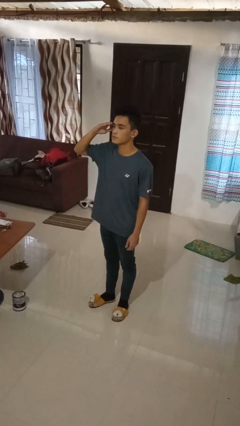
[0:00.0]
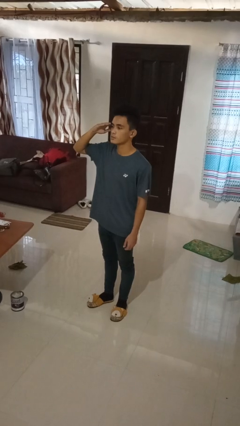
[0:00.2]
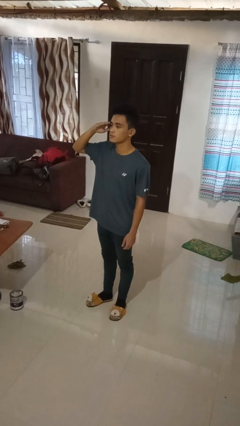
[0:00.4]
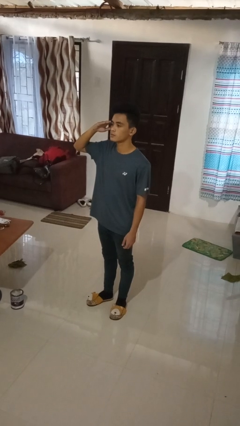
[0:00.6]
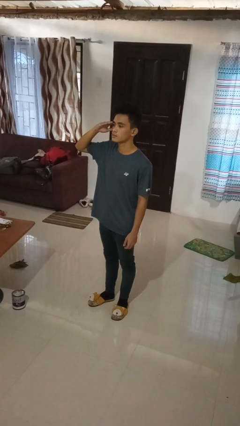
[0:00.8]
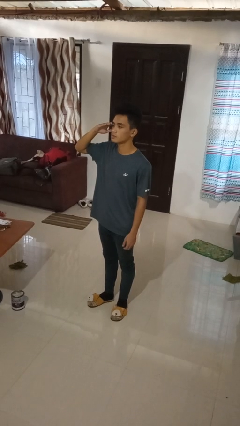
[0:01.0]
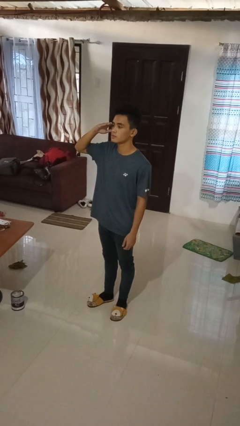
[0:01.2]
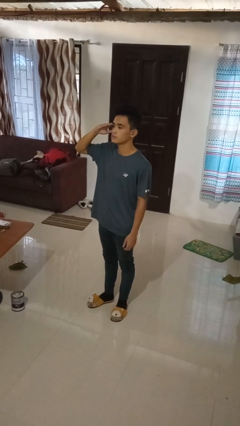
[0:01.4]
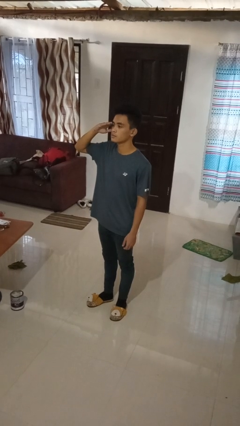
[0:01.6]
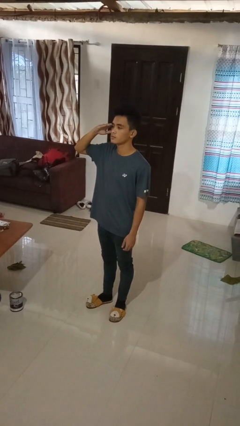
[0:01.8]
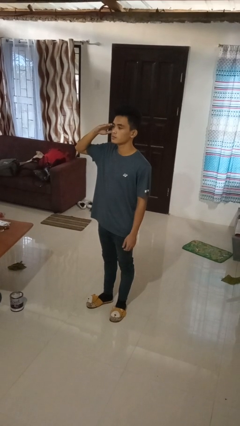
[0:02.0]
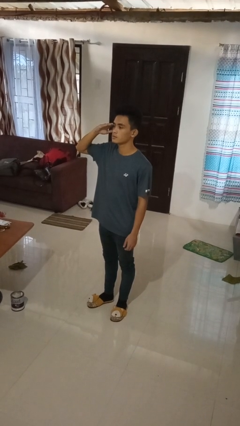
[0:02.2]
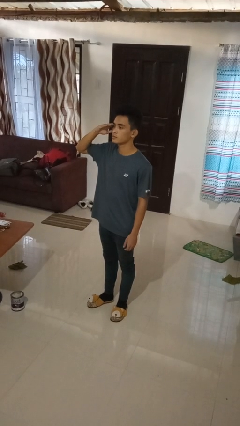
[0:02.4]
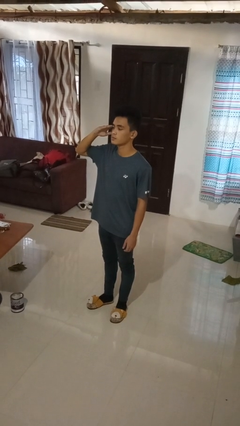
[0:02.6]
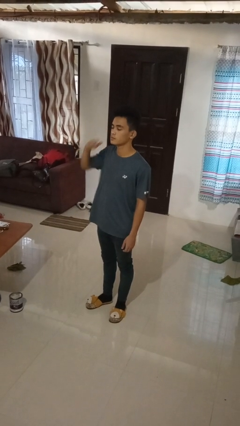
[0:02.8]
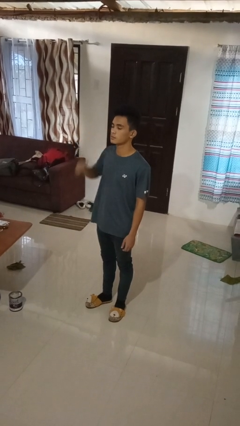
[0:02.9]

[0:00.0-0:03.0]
person salutes

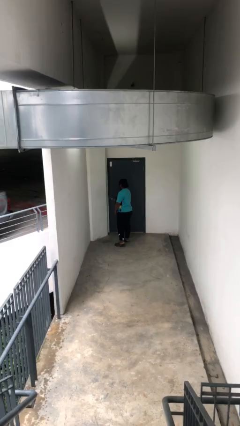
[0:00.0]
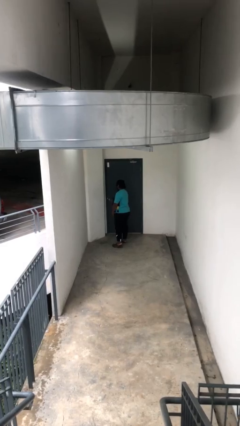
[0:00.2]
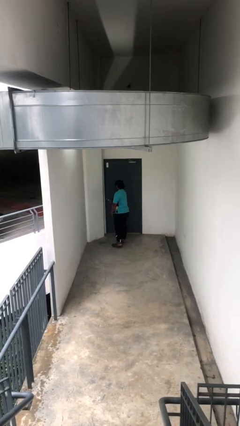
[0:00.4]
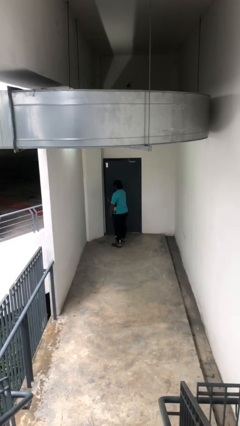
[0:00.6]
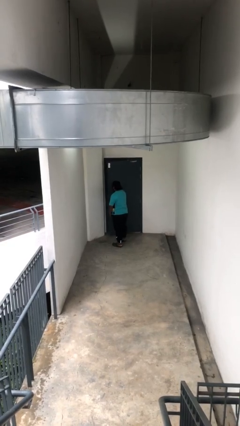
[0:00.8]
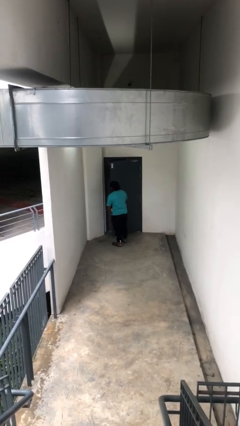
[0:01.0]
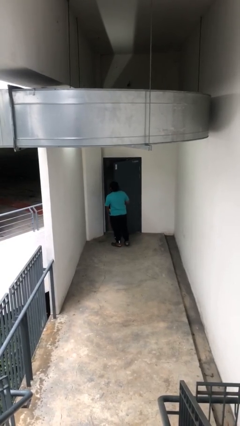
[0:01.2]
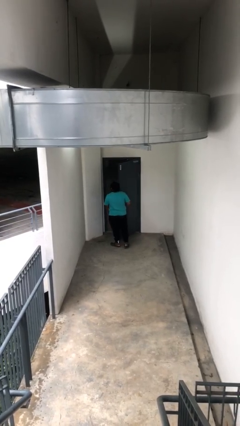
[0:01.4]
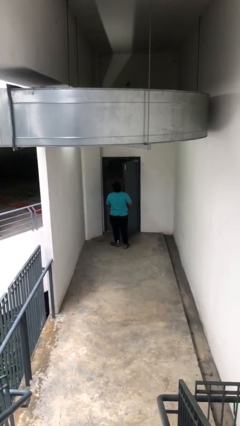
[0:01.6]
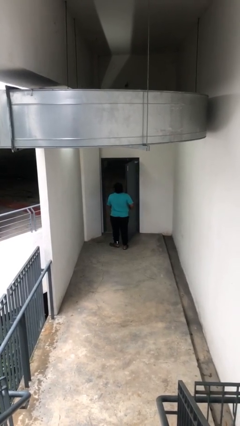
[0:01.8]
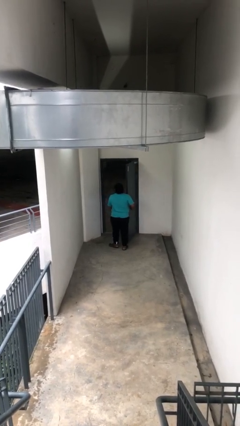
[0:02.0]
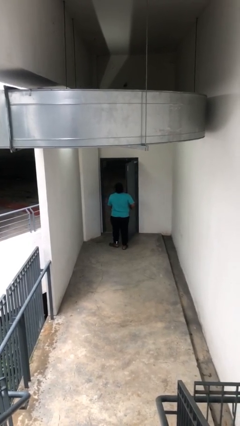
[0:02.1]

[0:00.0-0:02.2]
person opens facility door

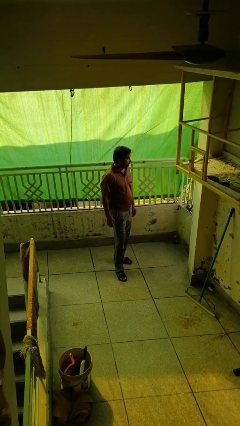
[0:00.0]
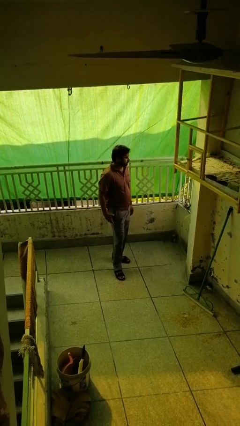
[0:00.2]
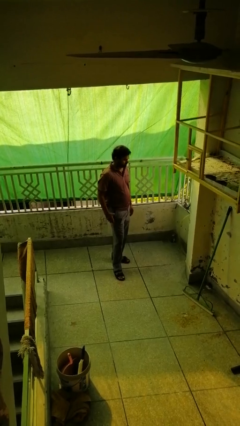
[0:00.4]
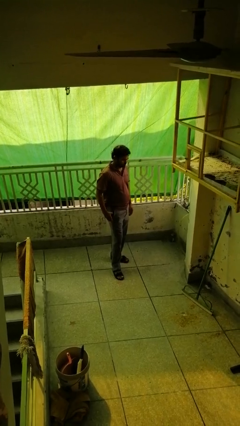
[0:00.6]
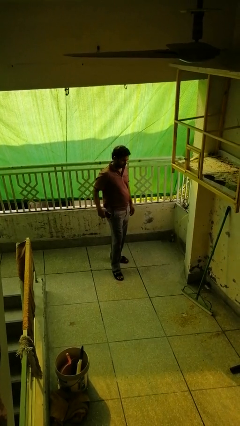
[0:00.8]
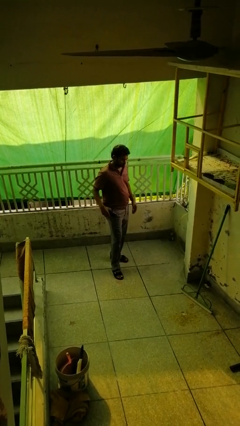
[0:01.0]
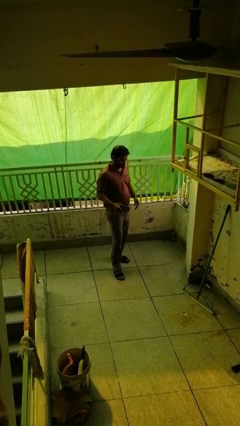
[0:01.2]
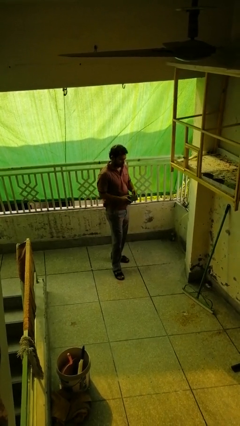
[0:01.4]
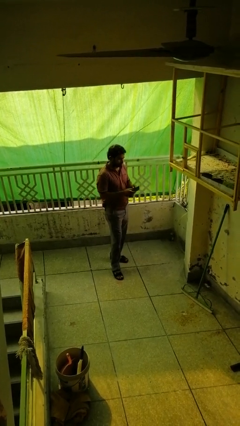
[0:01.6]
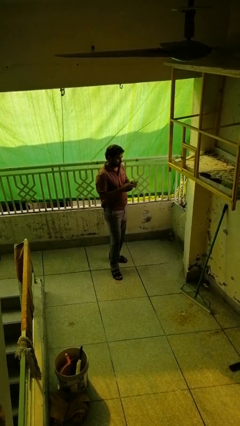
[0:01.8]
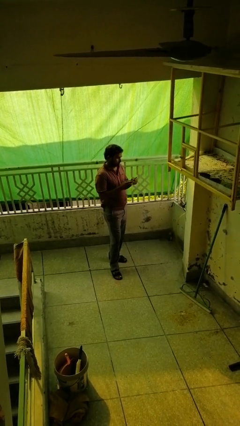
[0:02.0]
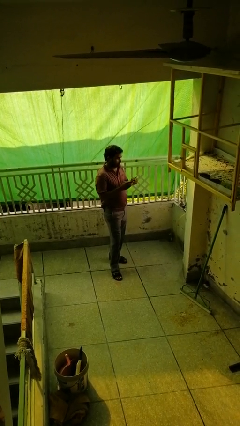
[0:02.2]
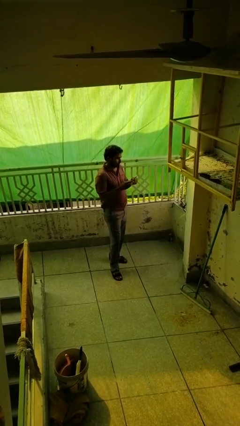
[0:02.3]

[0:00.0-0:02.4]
person takes phone from pocket

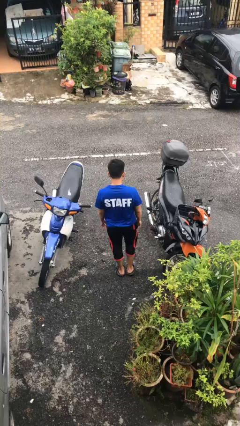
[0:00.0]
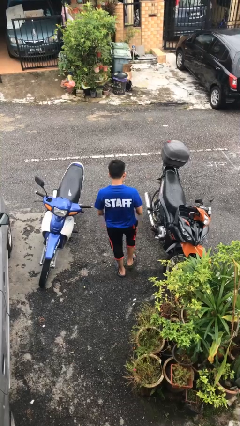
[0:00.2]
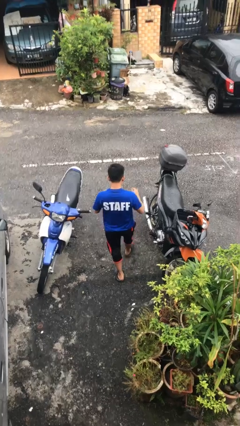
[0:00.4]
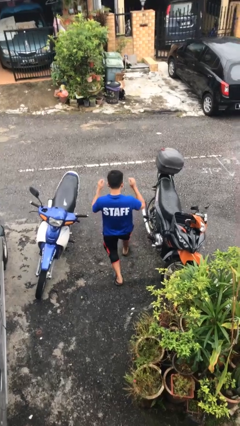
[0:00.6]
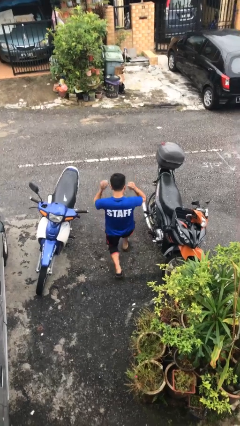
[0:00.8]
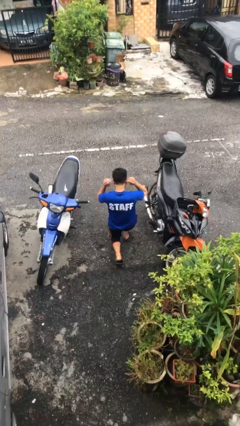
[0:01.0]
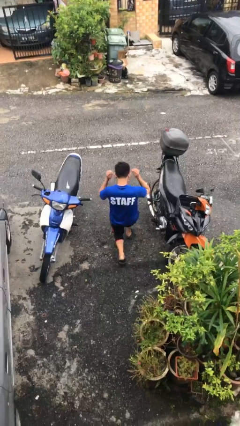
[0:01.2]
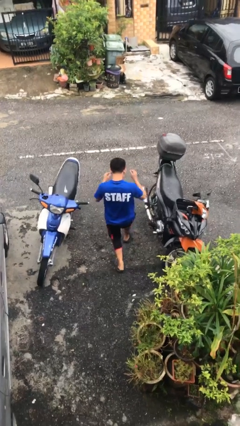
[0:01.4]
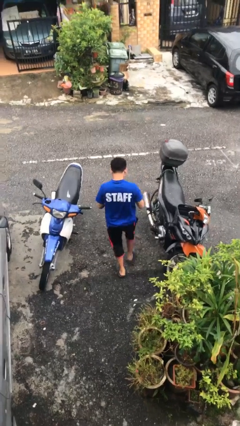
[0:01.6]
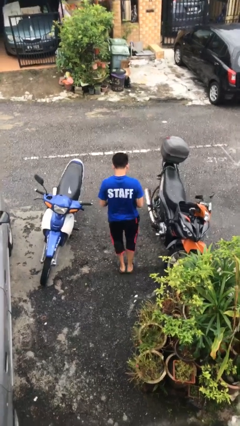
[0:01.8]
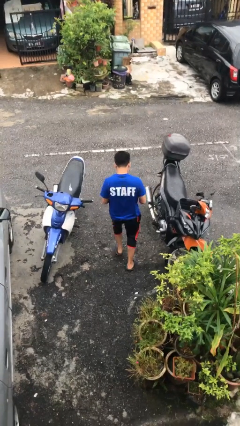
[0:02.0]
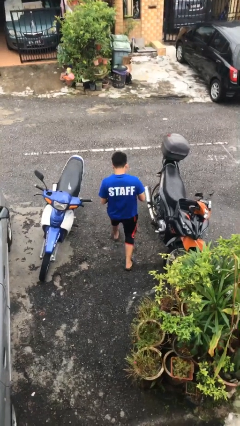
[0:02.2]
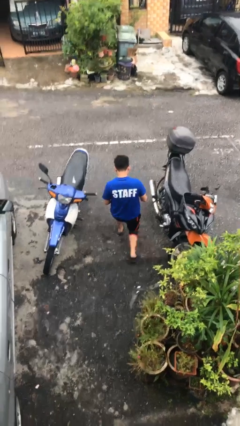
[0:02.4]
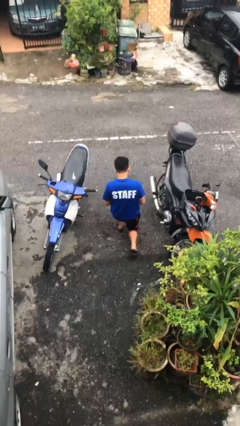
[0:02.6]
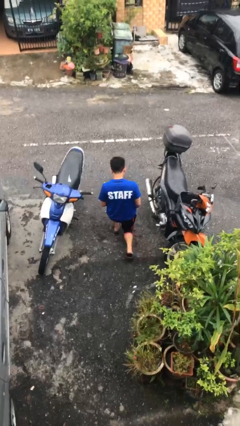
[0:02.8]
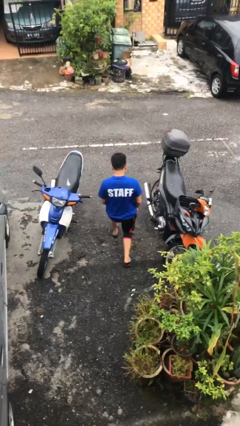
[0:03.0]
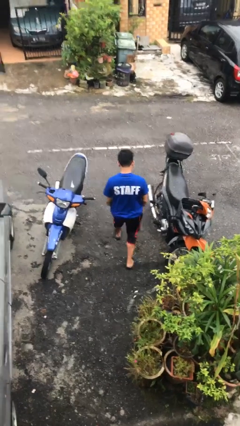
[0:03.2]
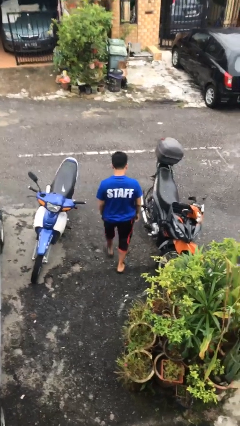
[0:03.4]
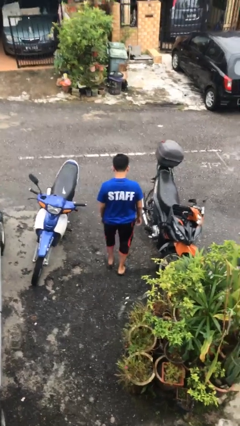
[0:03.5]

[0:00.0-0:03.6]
person exercises with lunges

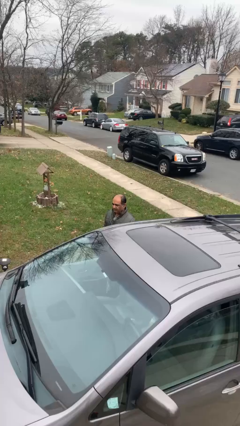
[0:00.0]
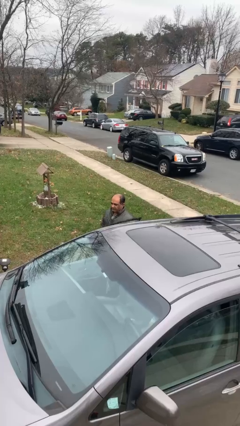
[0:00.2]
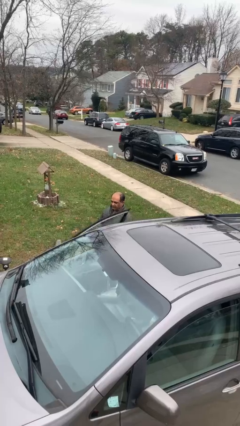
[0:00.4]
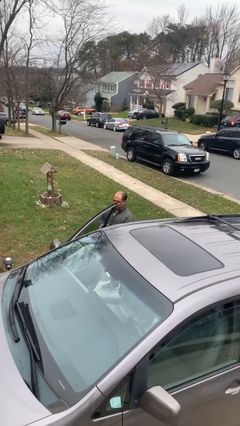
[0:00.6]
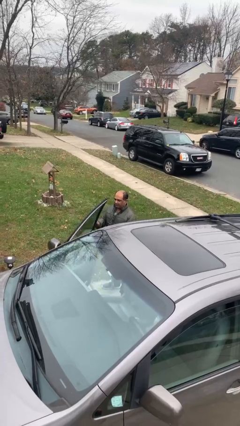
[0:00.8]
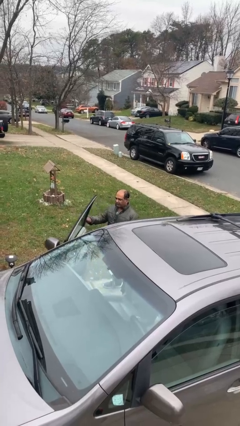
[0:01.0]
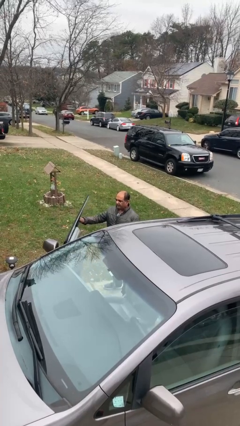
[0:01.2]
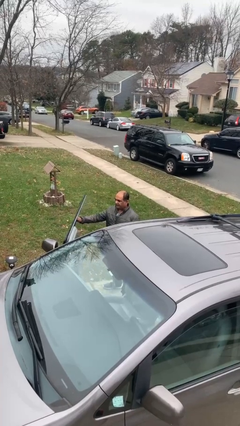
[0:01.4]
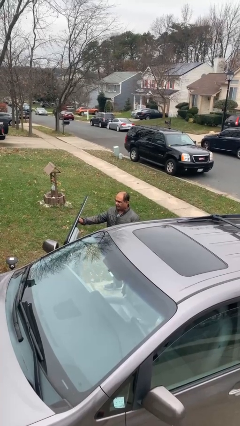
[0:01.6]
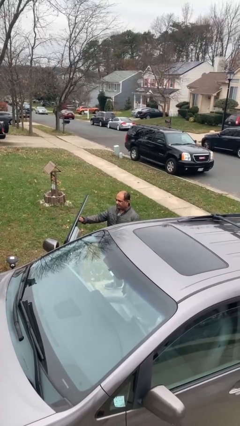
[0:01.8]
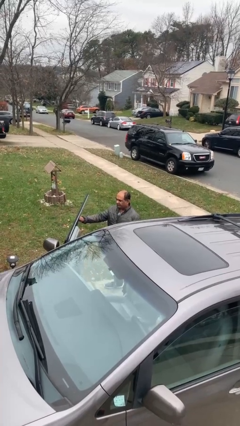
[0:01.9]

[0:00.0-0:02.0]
person opens car door

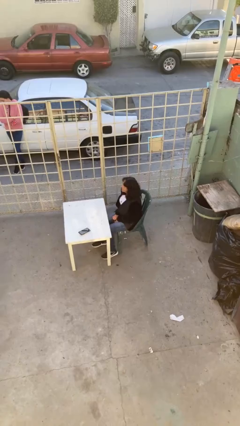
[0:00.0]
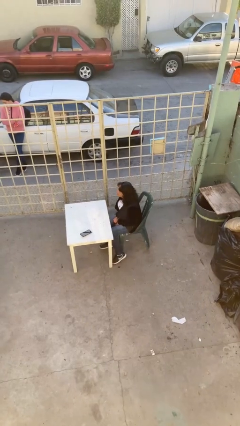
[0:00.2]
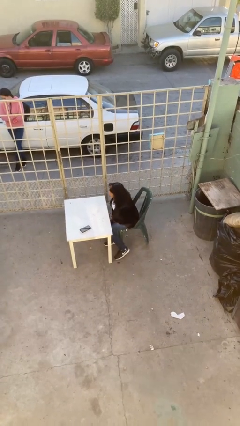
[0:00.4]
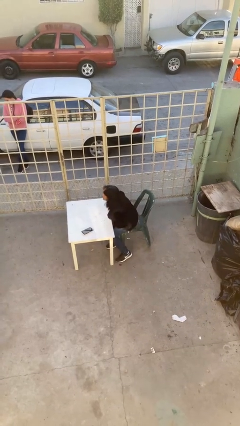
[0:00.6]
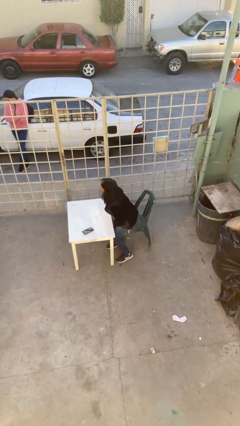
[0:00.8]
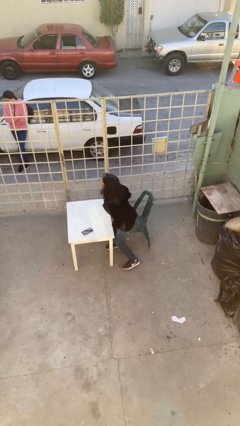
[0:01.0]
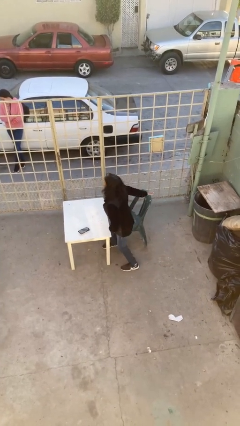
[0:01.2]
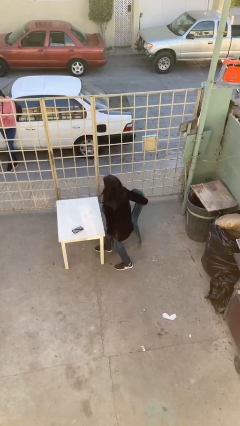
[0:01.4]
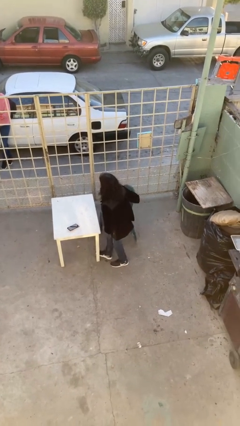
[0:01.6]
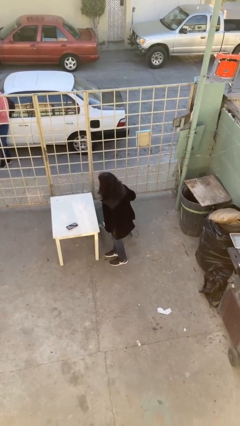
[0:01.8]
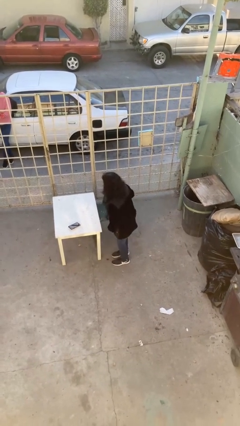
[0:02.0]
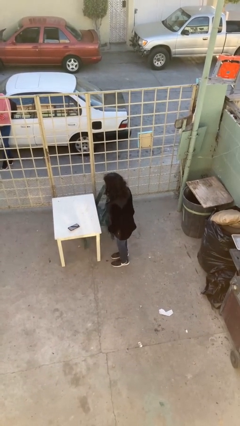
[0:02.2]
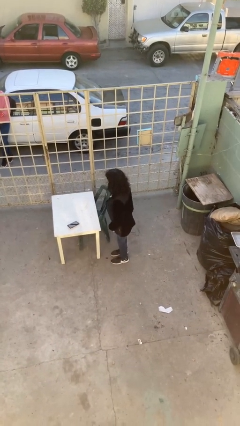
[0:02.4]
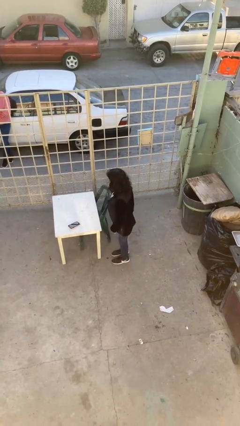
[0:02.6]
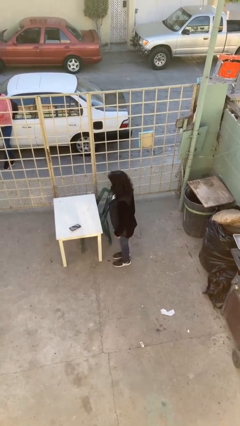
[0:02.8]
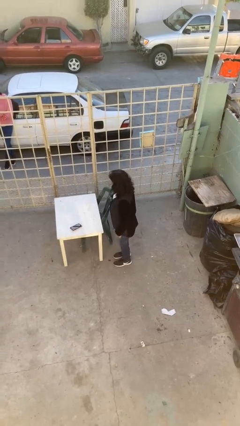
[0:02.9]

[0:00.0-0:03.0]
person stands up

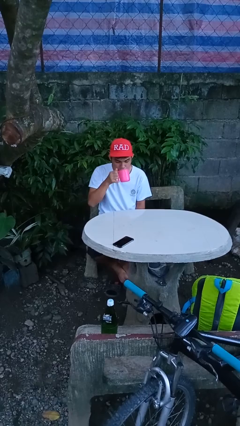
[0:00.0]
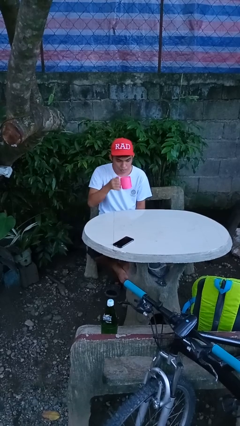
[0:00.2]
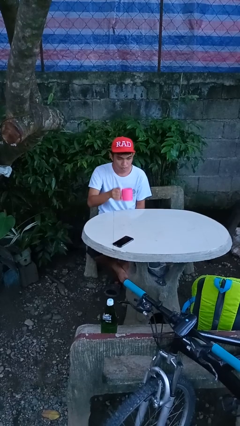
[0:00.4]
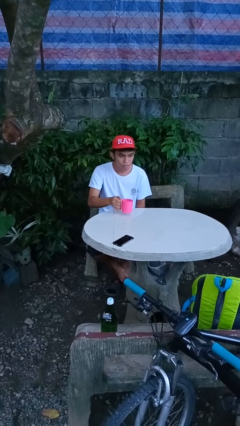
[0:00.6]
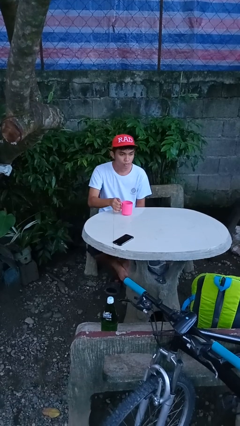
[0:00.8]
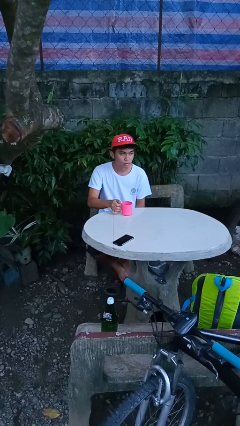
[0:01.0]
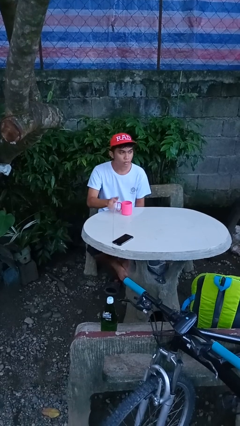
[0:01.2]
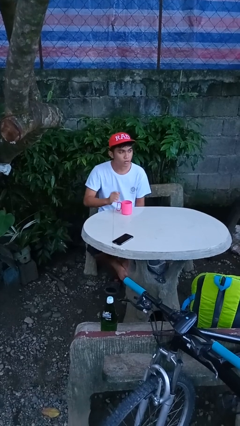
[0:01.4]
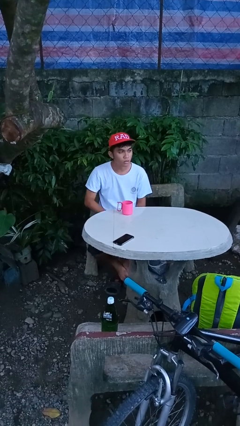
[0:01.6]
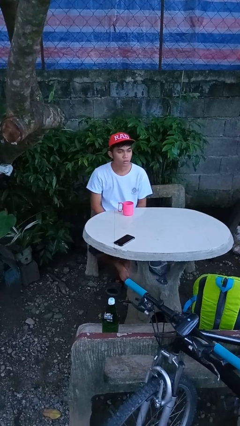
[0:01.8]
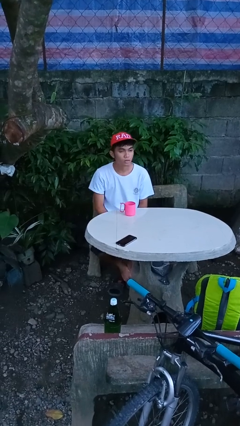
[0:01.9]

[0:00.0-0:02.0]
person puts down object on table
